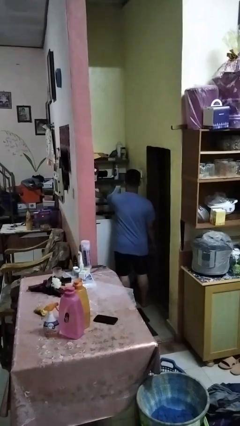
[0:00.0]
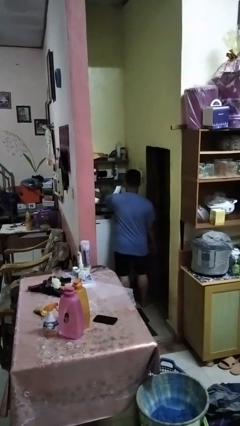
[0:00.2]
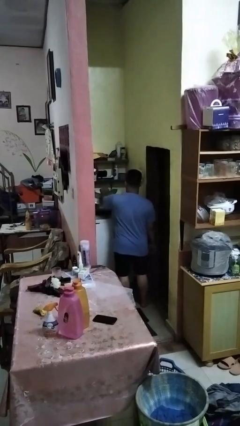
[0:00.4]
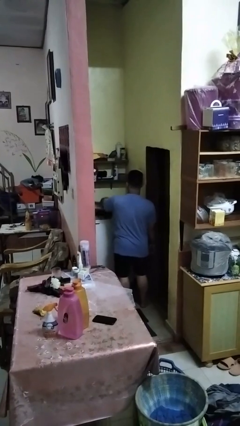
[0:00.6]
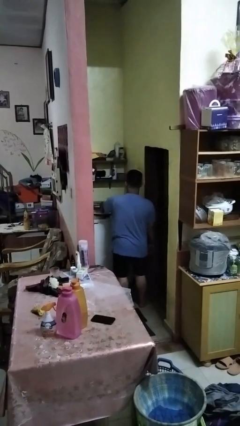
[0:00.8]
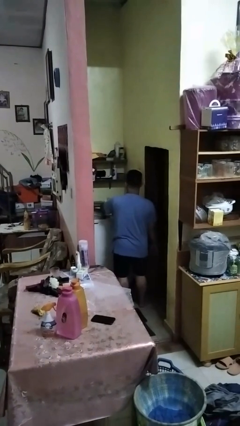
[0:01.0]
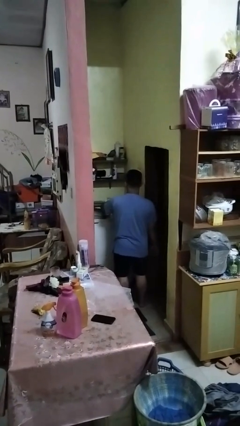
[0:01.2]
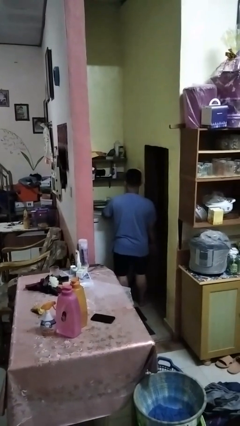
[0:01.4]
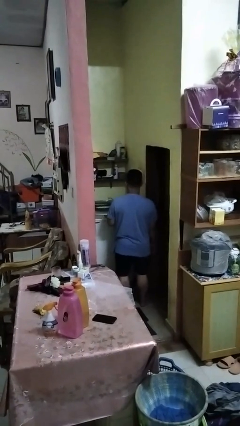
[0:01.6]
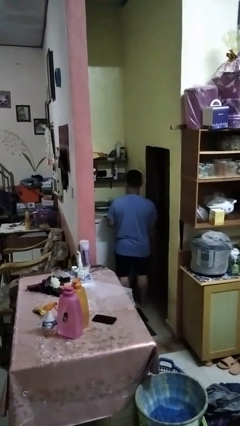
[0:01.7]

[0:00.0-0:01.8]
person closes clothes washer

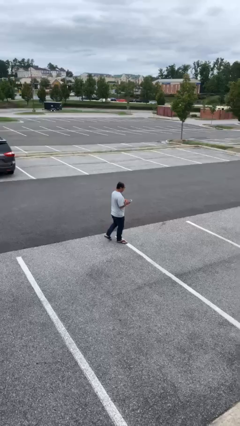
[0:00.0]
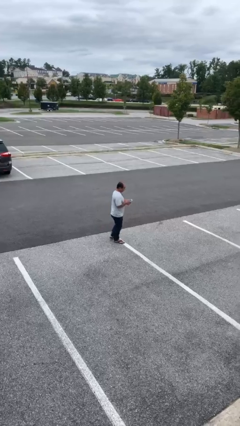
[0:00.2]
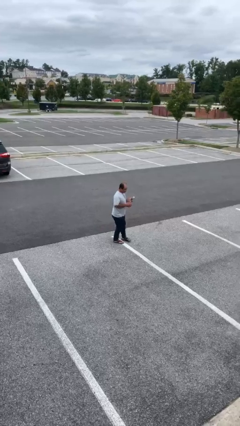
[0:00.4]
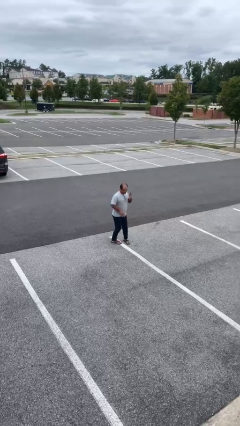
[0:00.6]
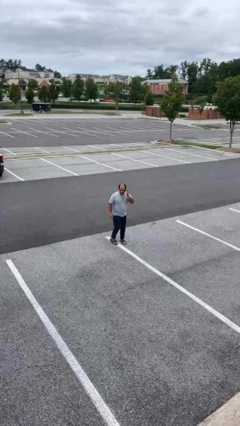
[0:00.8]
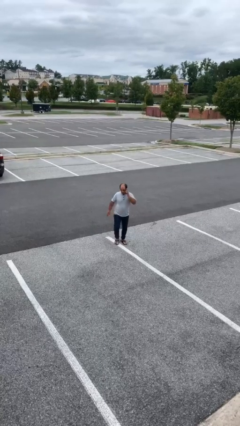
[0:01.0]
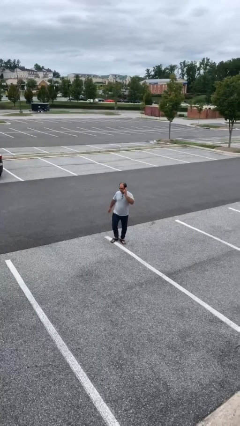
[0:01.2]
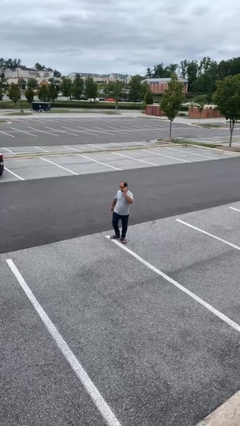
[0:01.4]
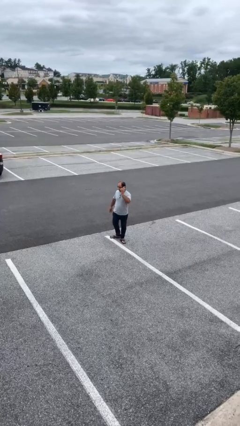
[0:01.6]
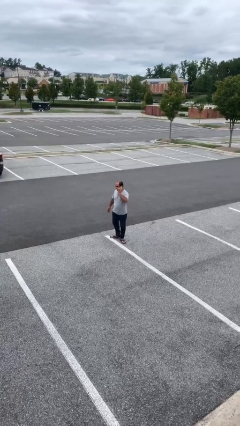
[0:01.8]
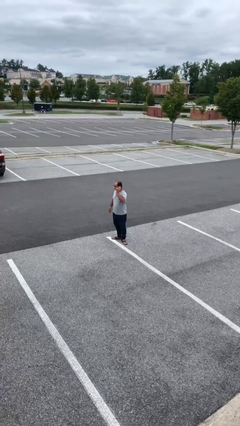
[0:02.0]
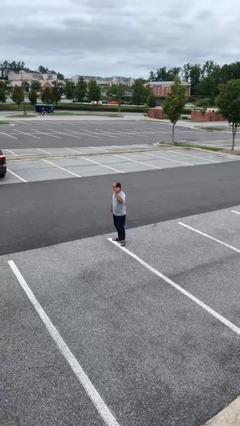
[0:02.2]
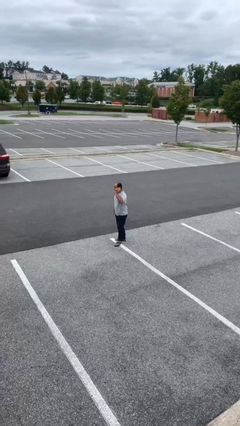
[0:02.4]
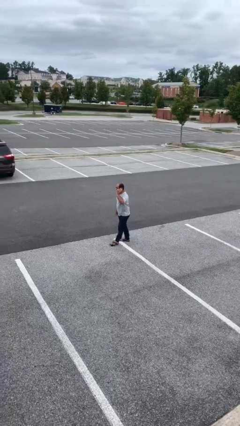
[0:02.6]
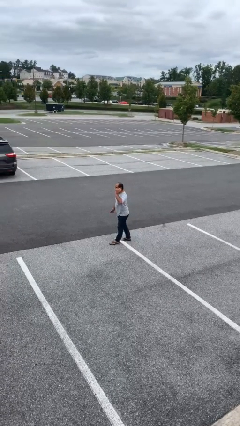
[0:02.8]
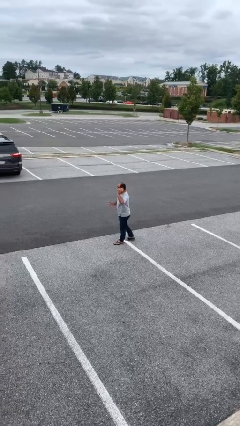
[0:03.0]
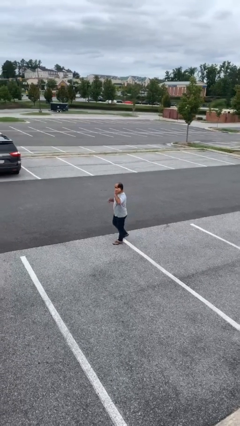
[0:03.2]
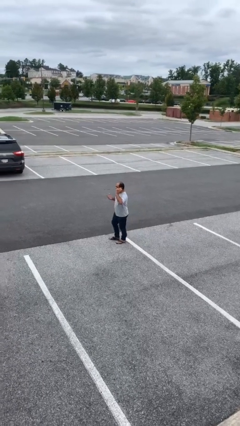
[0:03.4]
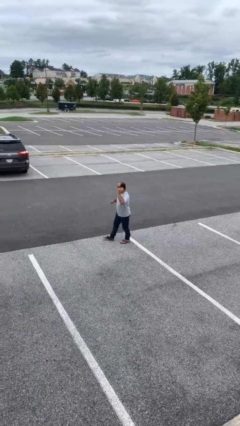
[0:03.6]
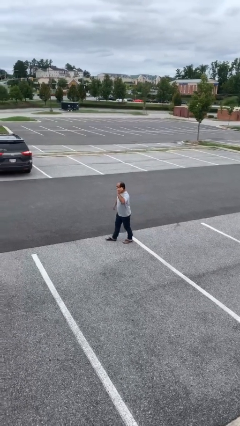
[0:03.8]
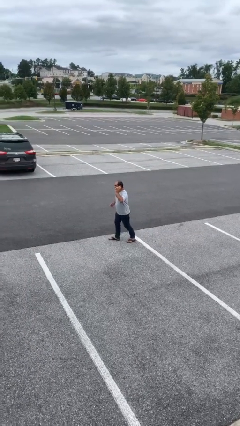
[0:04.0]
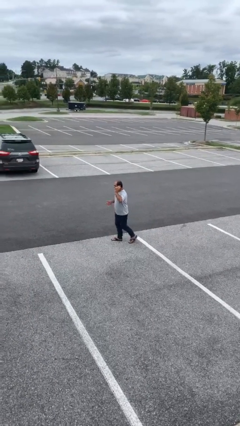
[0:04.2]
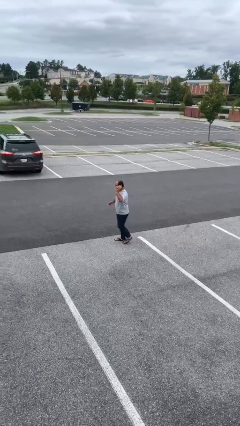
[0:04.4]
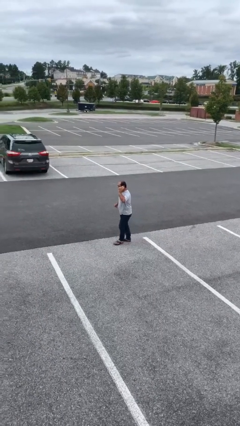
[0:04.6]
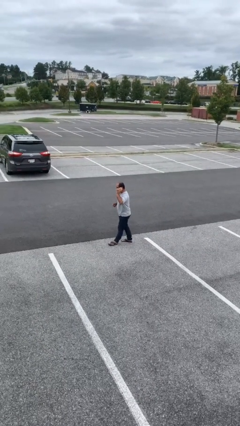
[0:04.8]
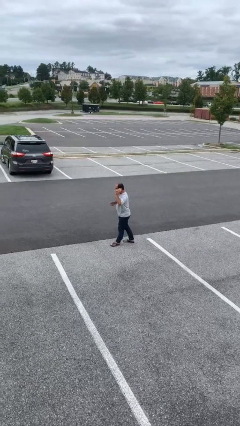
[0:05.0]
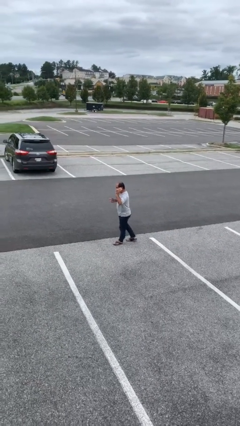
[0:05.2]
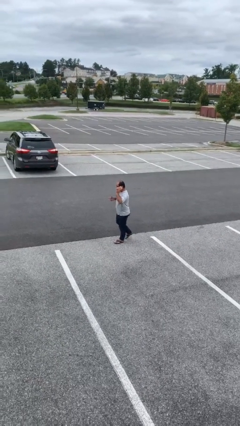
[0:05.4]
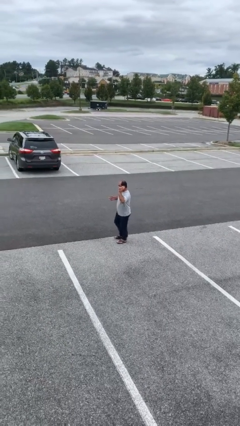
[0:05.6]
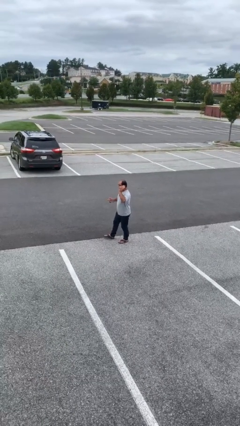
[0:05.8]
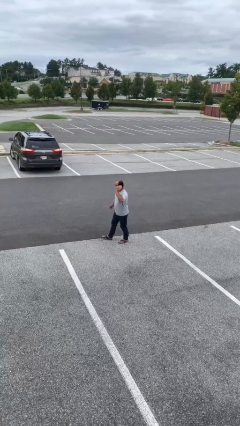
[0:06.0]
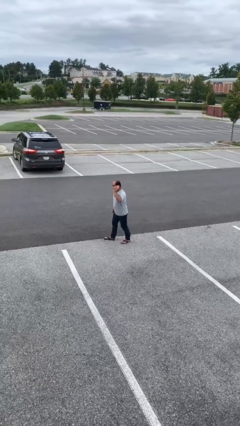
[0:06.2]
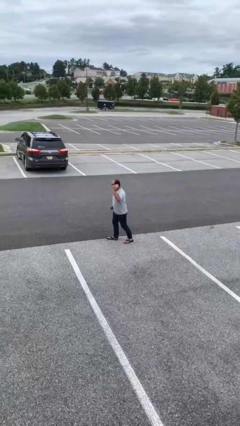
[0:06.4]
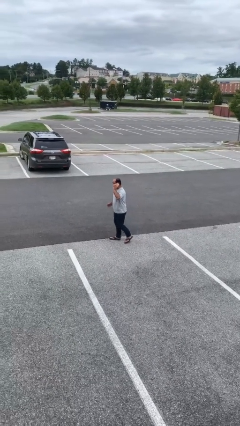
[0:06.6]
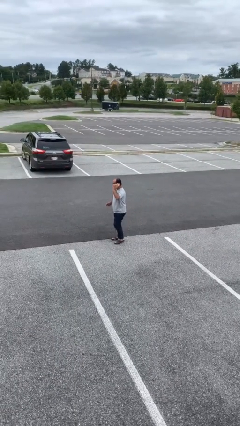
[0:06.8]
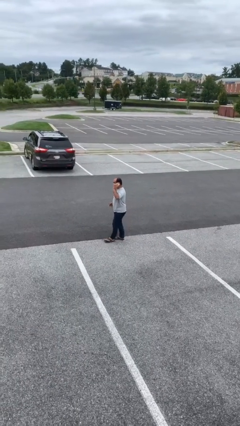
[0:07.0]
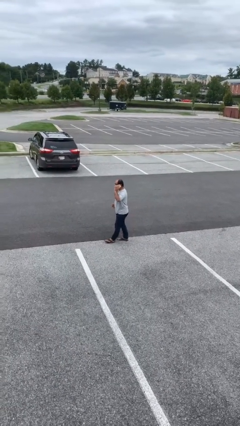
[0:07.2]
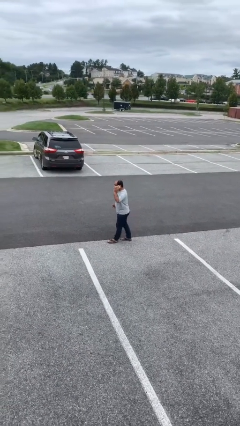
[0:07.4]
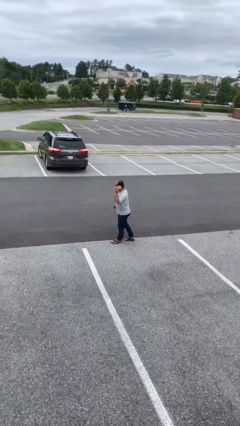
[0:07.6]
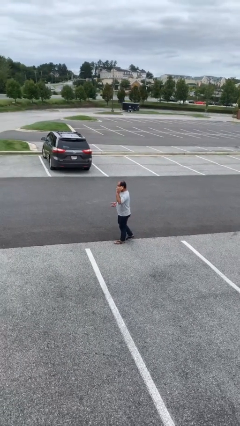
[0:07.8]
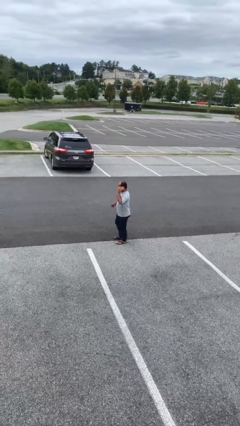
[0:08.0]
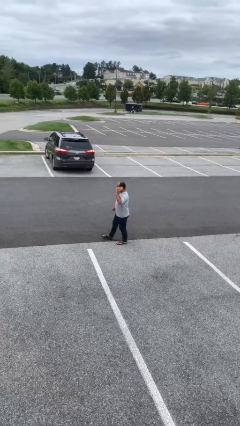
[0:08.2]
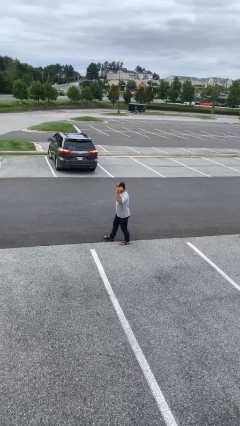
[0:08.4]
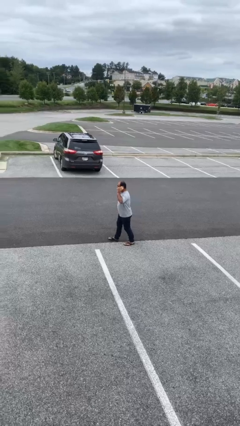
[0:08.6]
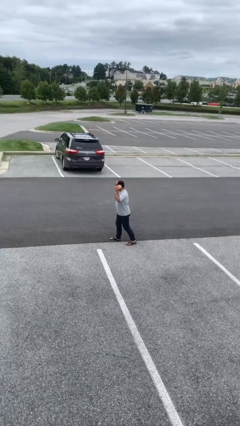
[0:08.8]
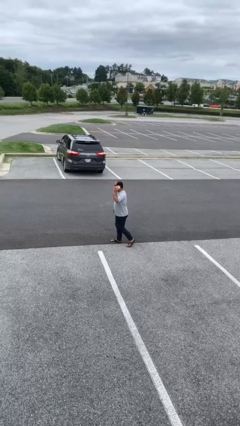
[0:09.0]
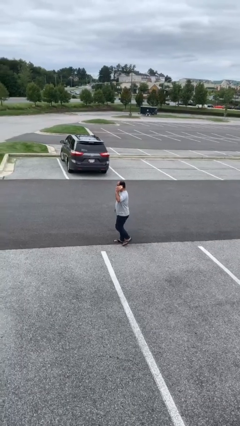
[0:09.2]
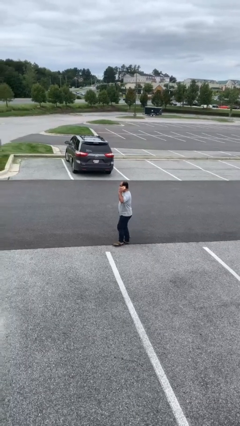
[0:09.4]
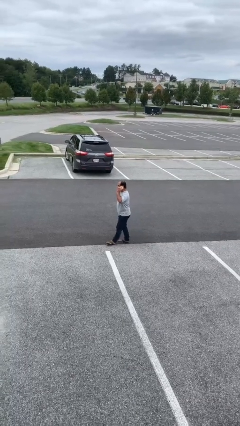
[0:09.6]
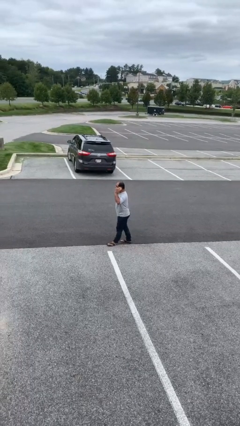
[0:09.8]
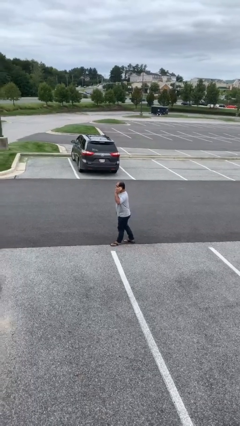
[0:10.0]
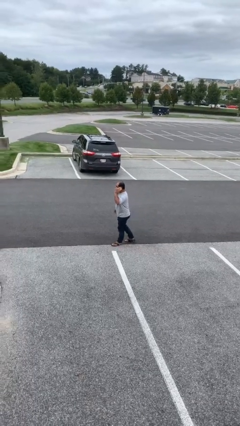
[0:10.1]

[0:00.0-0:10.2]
person talks on phone

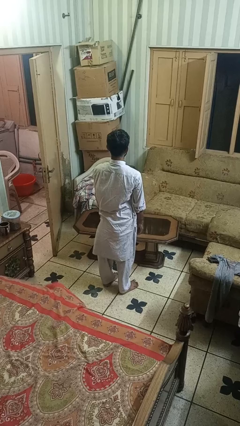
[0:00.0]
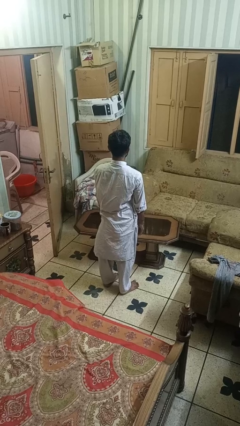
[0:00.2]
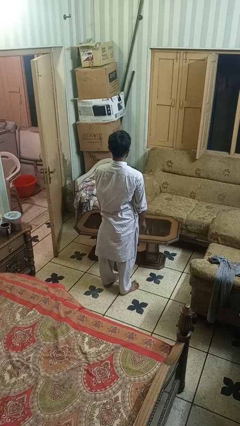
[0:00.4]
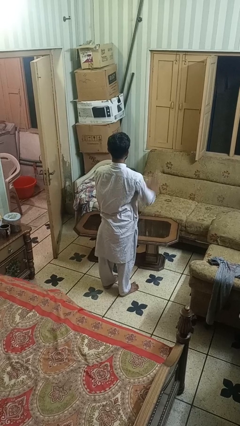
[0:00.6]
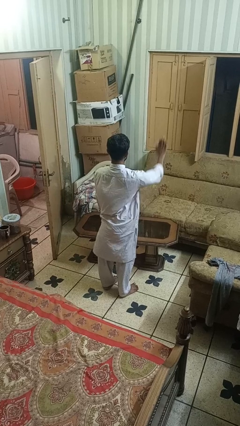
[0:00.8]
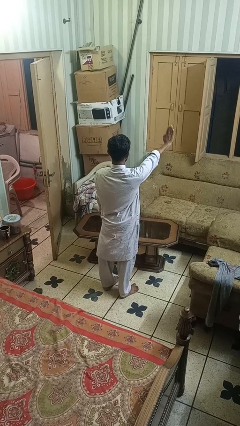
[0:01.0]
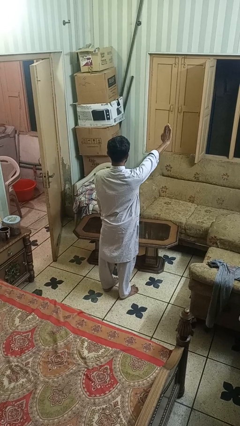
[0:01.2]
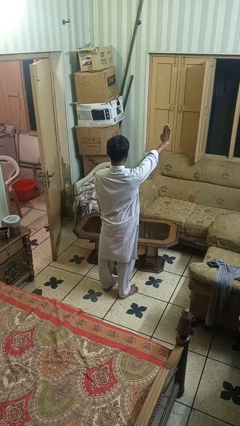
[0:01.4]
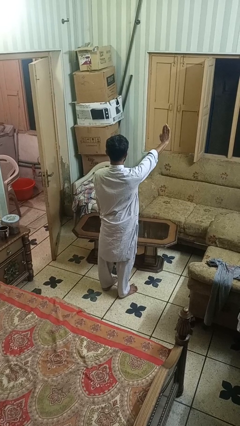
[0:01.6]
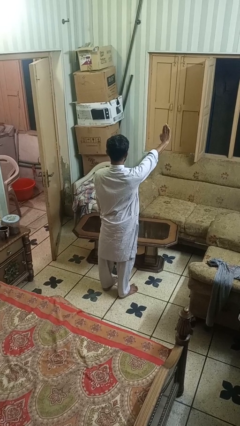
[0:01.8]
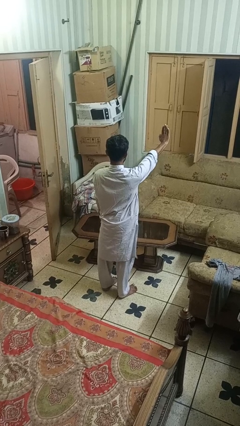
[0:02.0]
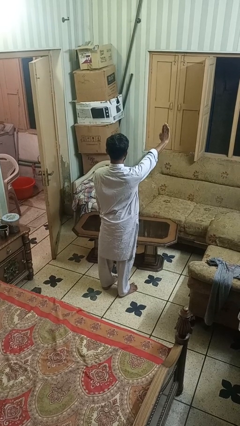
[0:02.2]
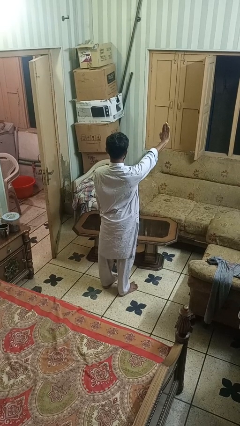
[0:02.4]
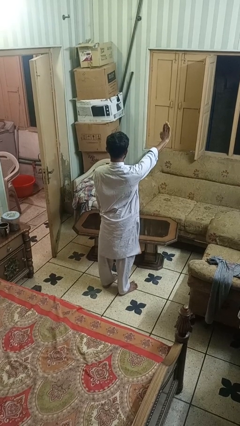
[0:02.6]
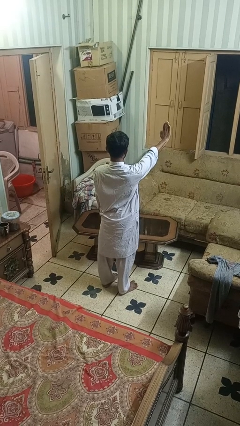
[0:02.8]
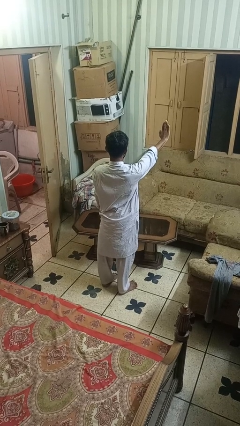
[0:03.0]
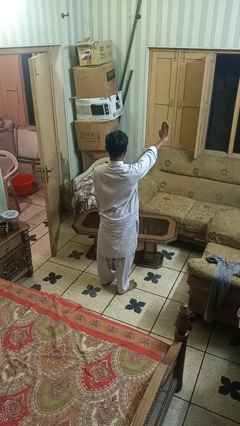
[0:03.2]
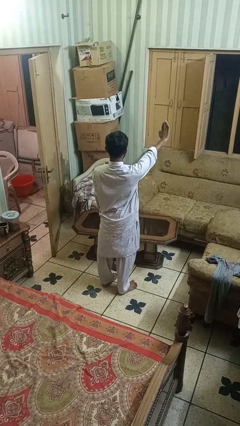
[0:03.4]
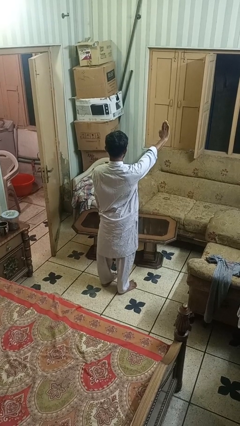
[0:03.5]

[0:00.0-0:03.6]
person gestures stop

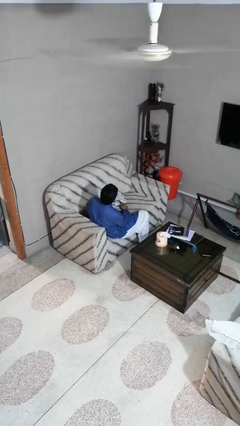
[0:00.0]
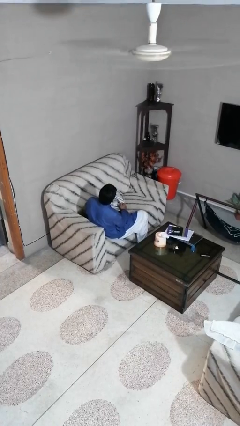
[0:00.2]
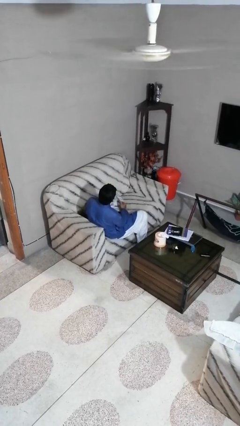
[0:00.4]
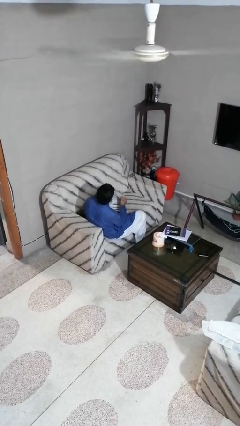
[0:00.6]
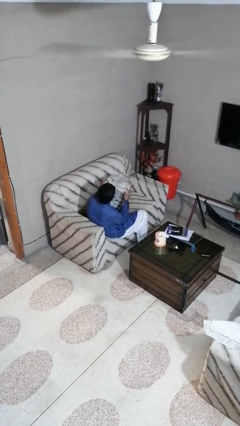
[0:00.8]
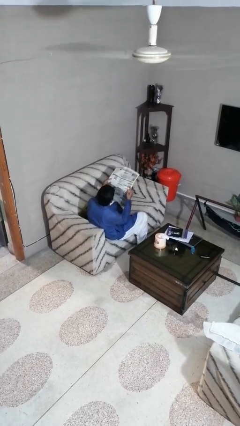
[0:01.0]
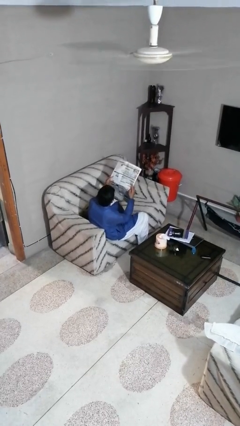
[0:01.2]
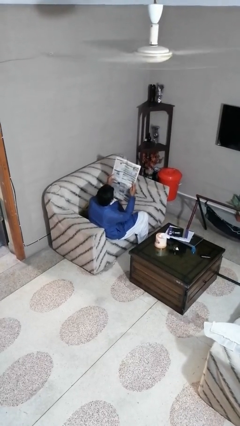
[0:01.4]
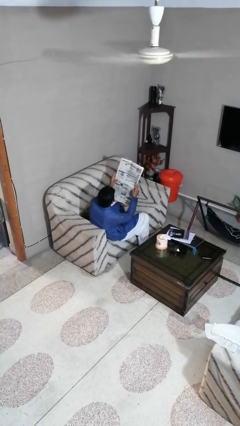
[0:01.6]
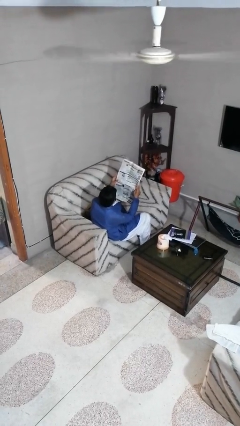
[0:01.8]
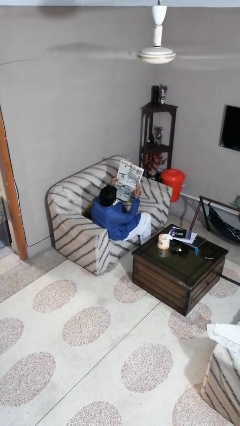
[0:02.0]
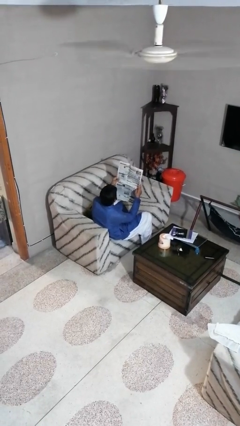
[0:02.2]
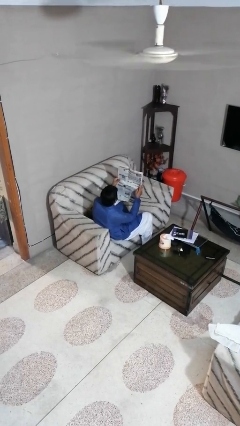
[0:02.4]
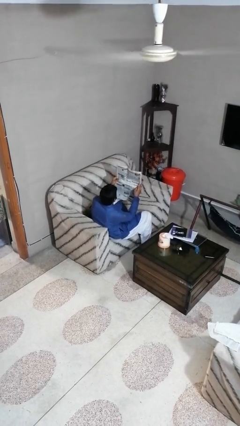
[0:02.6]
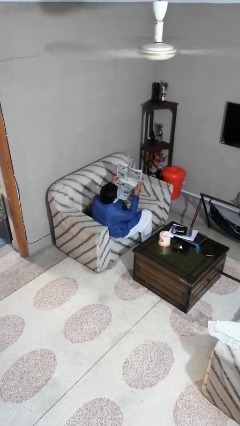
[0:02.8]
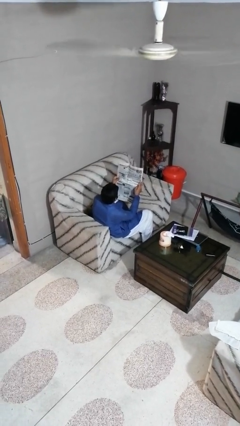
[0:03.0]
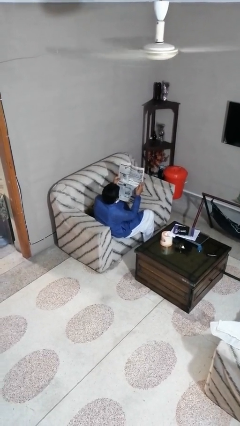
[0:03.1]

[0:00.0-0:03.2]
person reads newspaper
